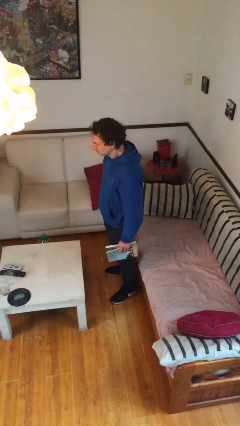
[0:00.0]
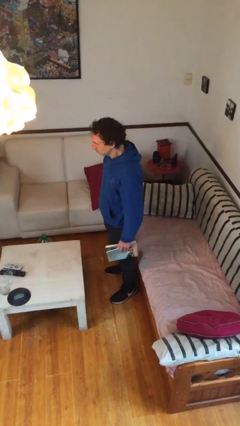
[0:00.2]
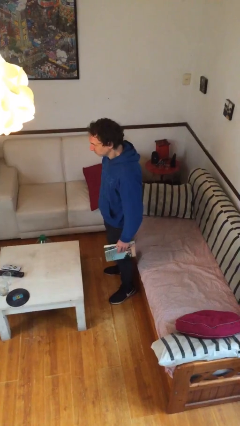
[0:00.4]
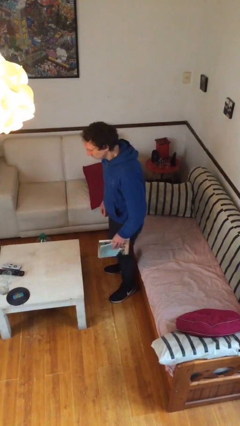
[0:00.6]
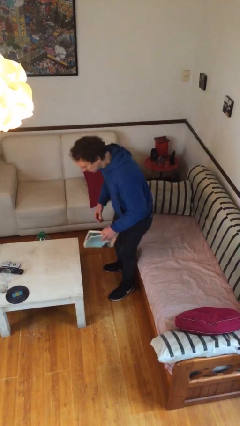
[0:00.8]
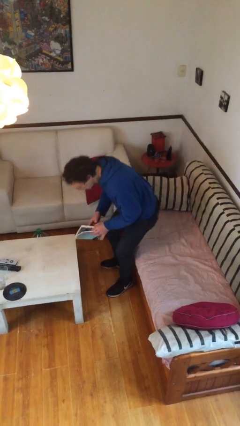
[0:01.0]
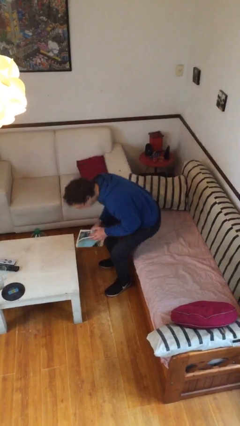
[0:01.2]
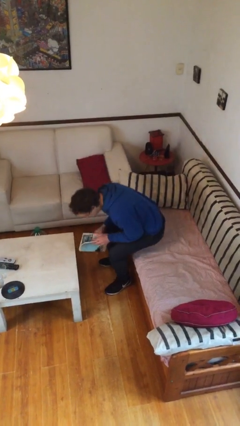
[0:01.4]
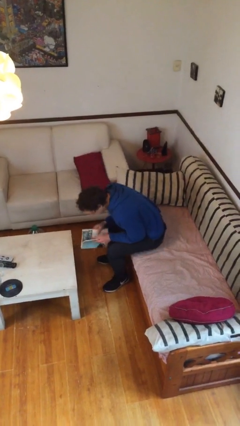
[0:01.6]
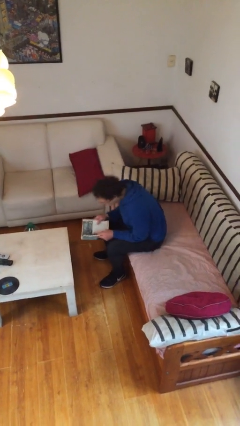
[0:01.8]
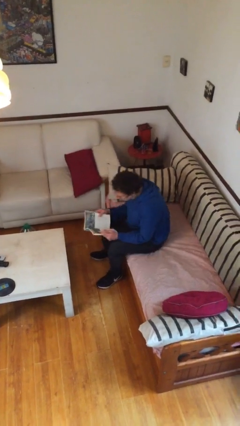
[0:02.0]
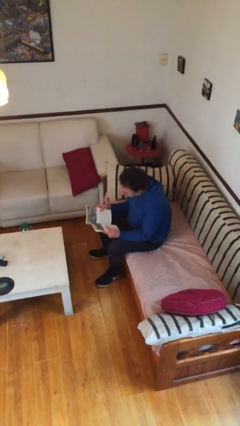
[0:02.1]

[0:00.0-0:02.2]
person sits down

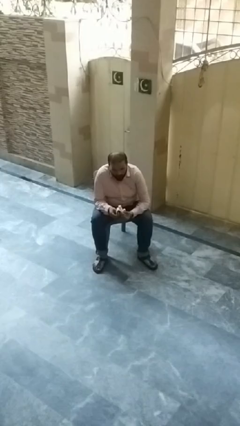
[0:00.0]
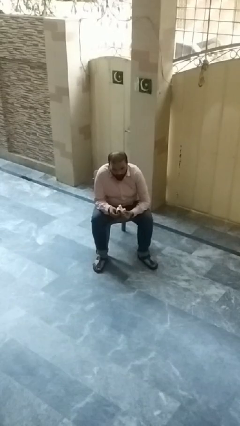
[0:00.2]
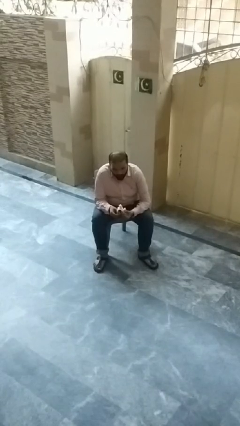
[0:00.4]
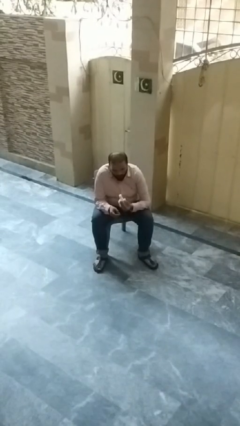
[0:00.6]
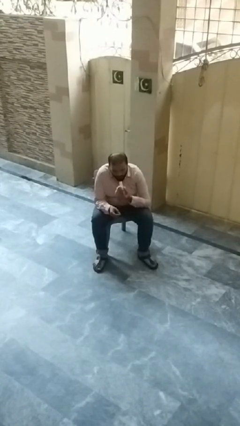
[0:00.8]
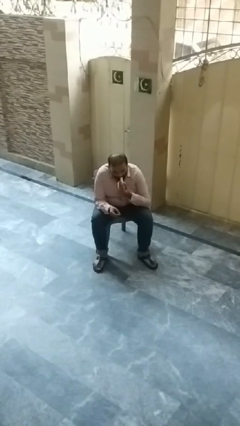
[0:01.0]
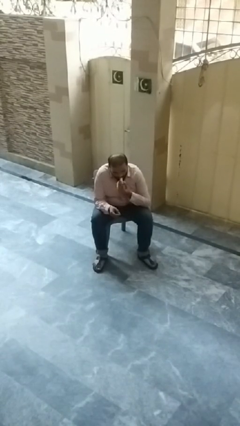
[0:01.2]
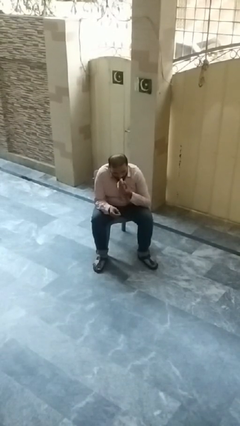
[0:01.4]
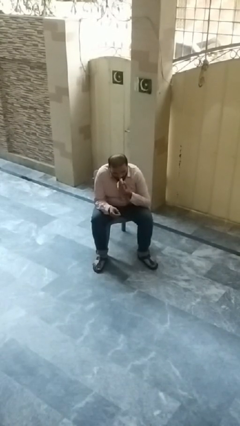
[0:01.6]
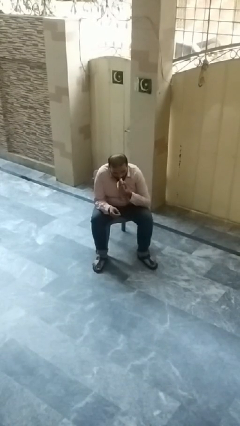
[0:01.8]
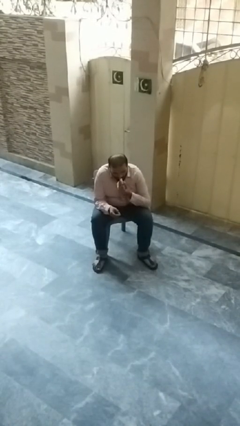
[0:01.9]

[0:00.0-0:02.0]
person eats banana

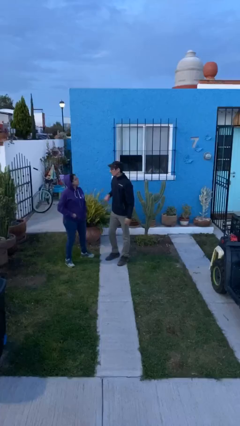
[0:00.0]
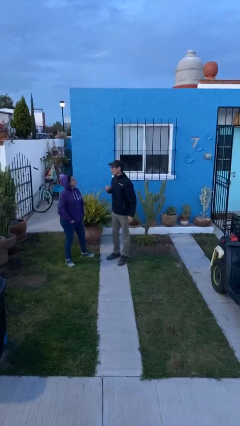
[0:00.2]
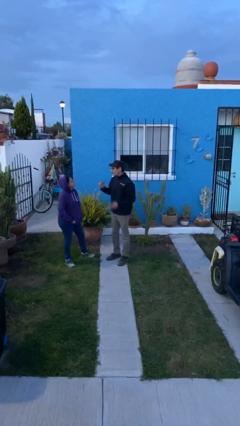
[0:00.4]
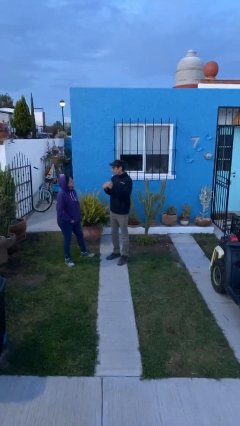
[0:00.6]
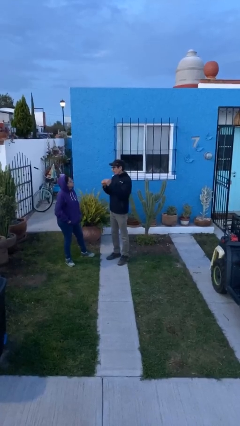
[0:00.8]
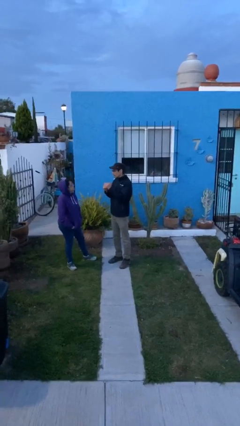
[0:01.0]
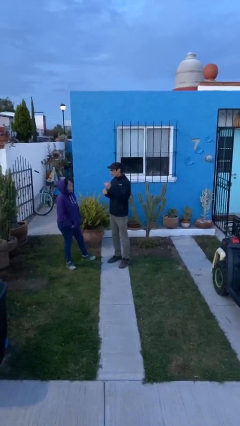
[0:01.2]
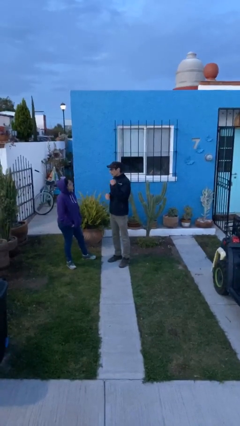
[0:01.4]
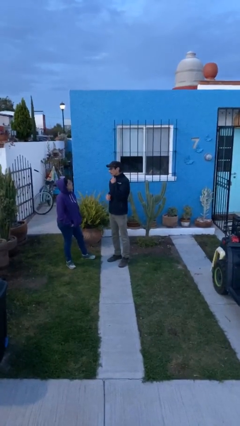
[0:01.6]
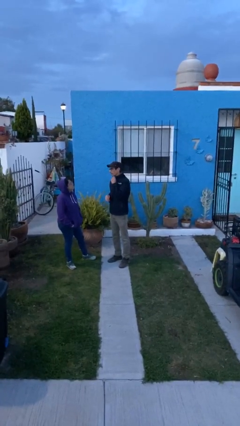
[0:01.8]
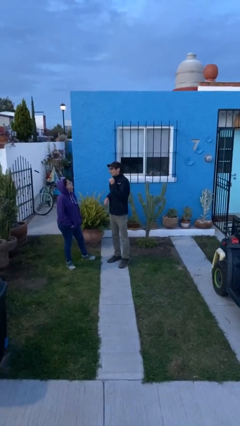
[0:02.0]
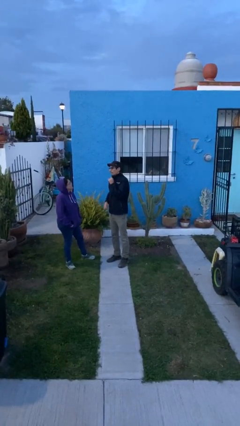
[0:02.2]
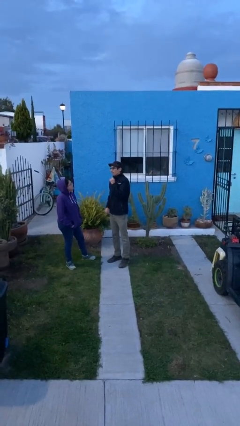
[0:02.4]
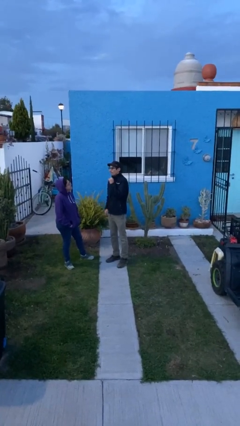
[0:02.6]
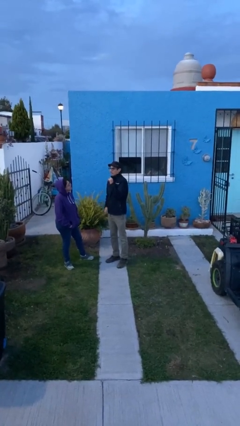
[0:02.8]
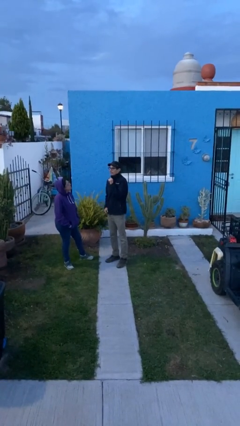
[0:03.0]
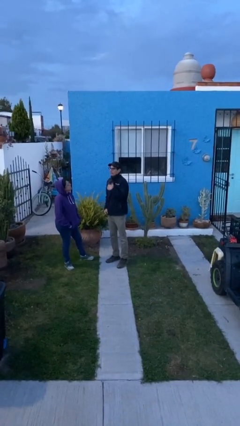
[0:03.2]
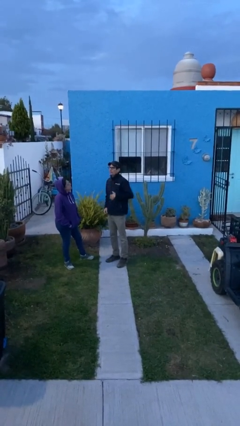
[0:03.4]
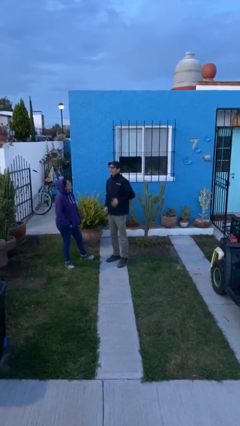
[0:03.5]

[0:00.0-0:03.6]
person talks to person

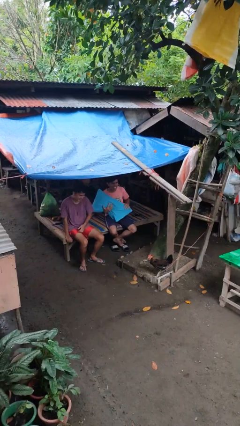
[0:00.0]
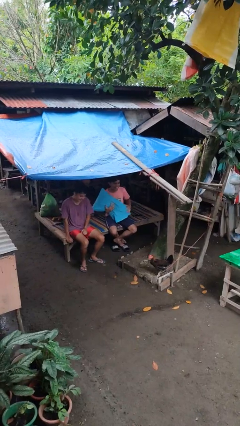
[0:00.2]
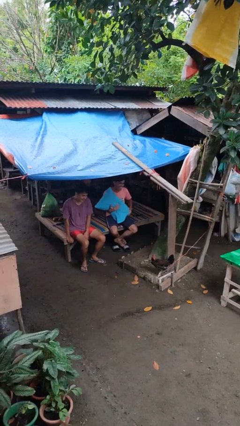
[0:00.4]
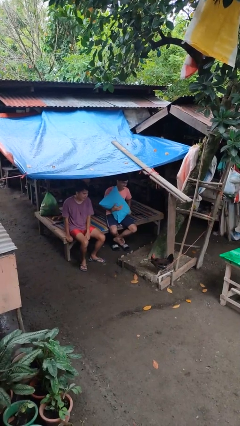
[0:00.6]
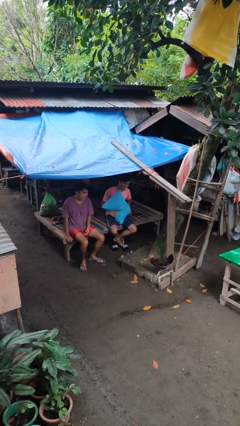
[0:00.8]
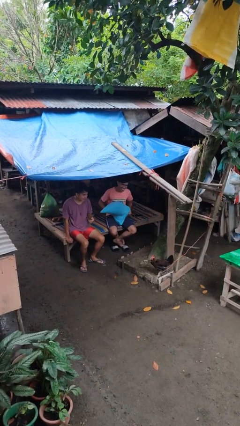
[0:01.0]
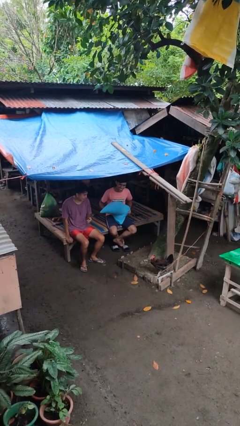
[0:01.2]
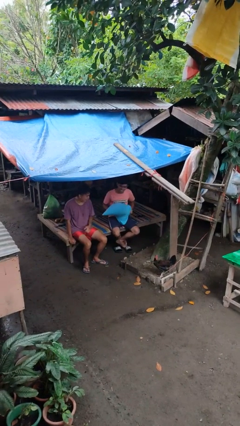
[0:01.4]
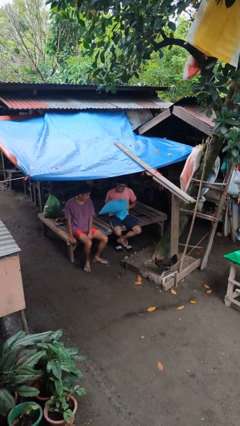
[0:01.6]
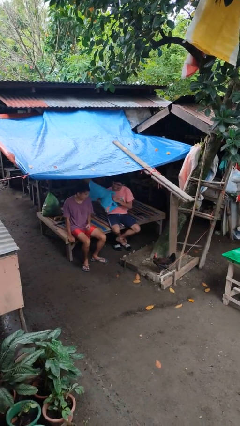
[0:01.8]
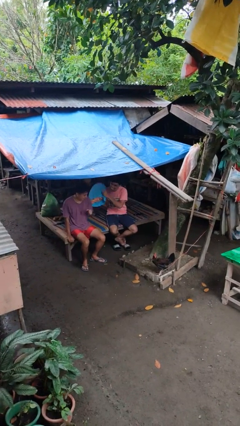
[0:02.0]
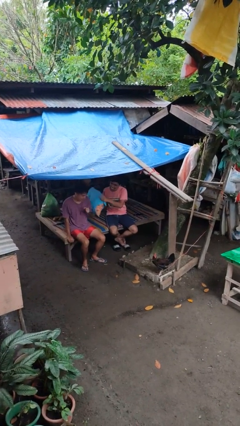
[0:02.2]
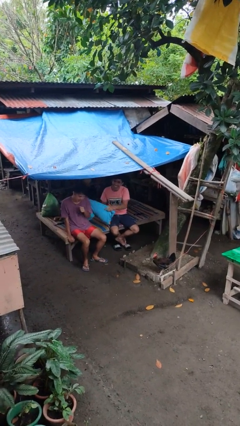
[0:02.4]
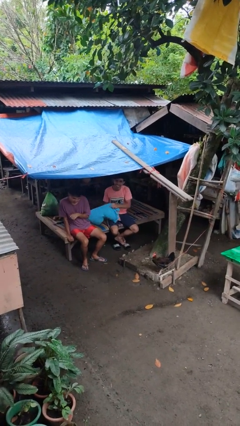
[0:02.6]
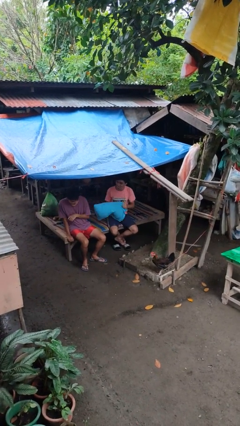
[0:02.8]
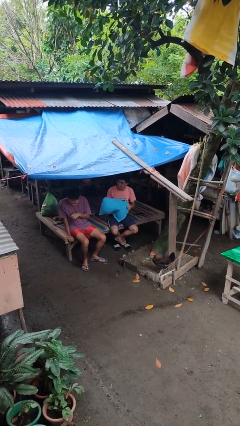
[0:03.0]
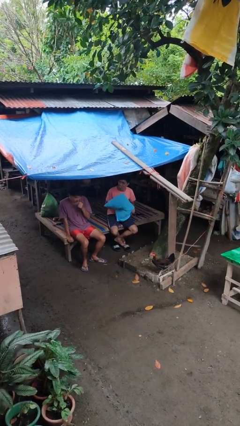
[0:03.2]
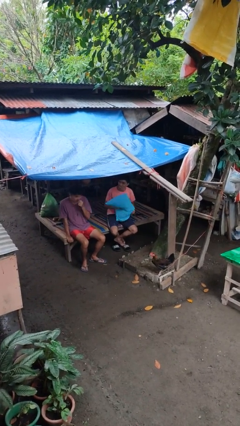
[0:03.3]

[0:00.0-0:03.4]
person hits person with pillow

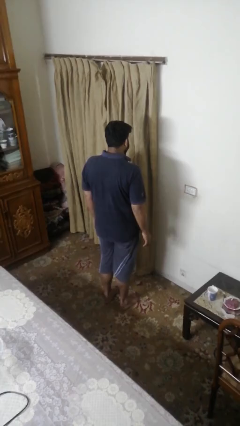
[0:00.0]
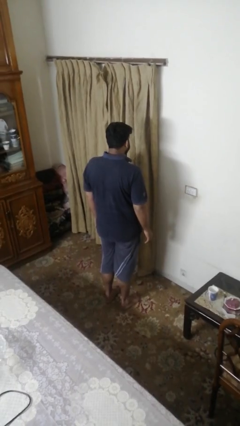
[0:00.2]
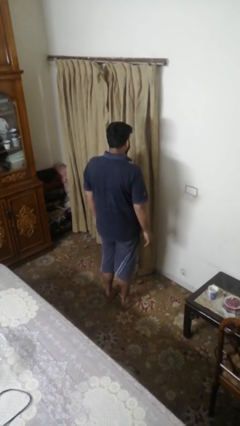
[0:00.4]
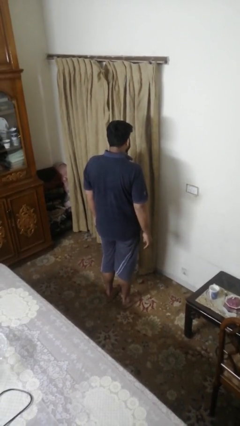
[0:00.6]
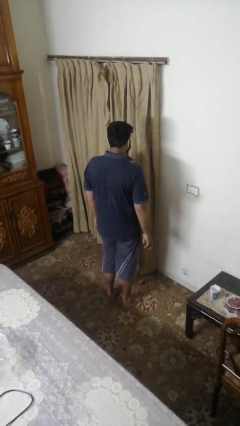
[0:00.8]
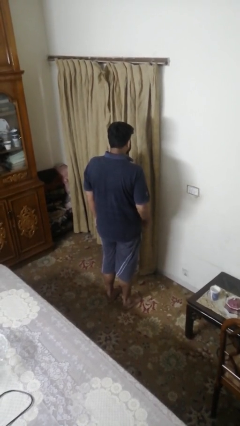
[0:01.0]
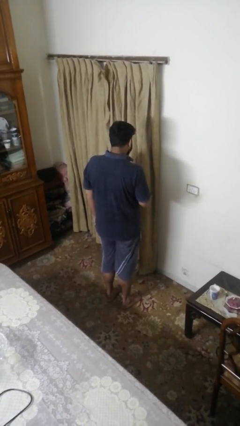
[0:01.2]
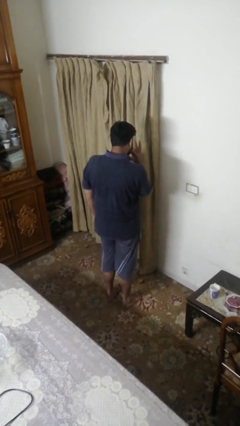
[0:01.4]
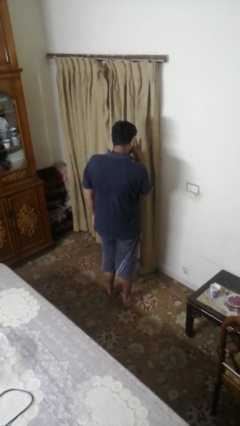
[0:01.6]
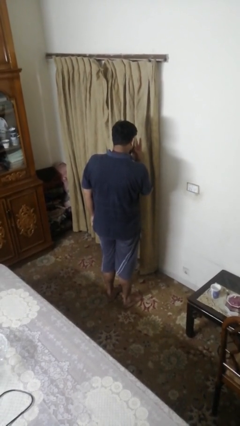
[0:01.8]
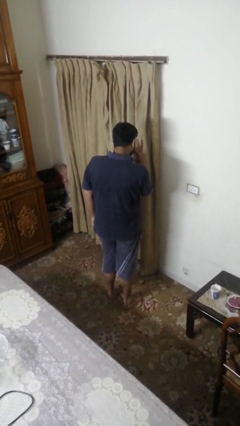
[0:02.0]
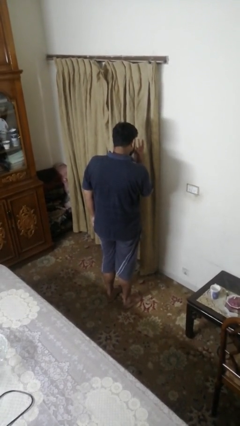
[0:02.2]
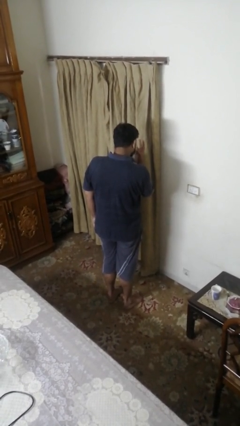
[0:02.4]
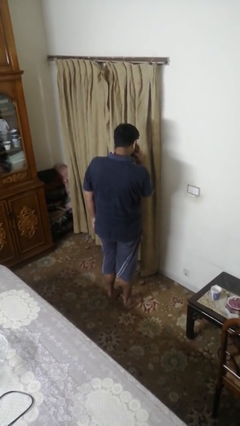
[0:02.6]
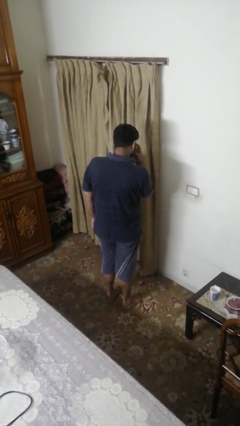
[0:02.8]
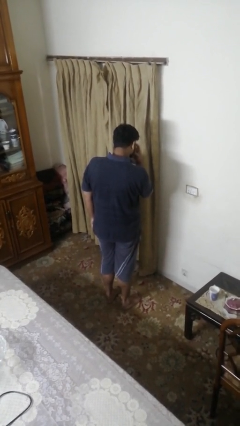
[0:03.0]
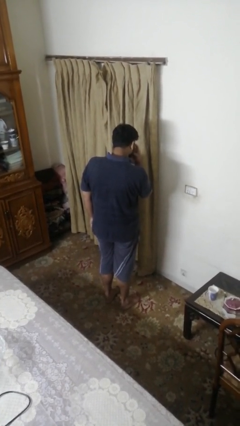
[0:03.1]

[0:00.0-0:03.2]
person gestures watch closely

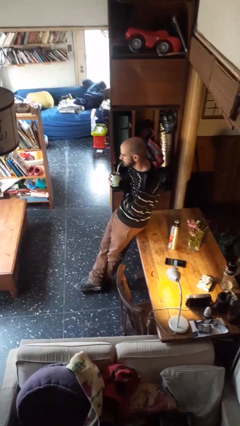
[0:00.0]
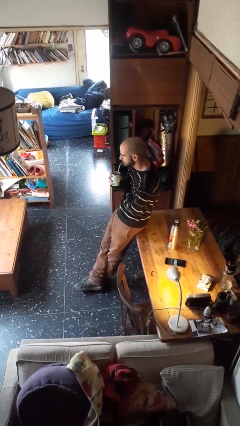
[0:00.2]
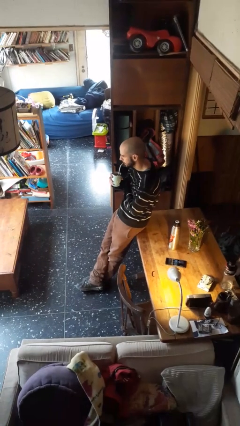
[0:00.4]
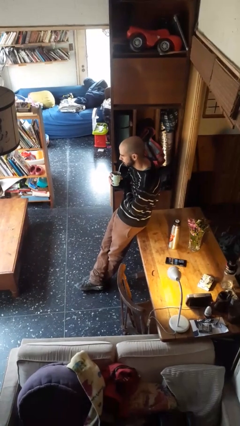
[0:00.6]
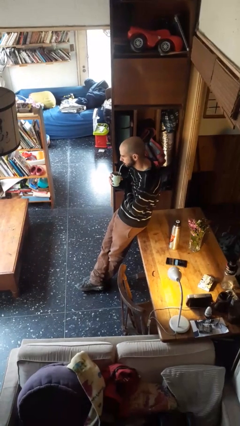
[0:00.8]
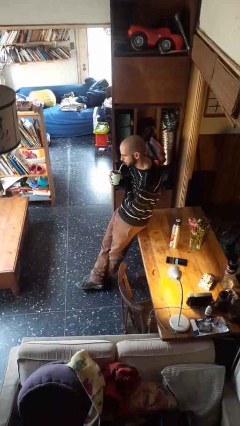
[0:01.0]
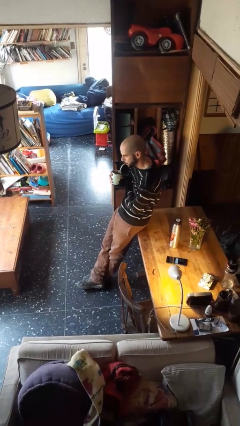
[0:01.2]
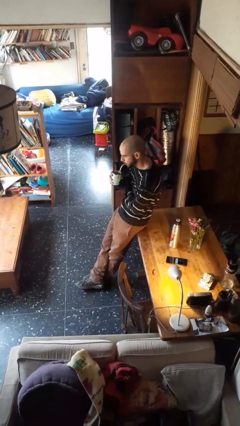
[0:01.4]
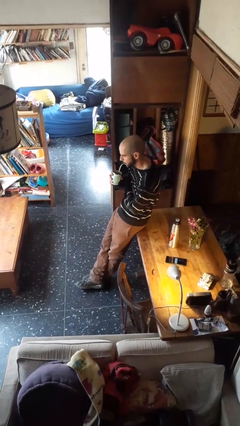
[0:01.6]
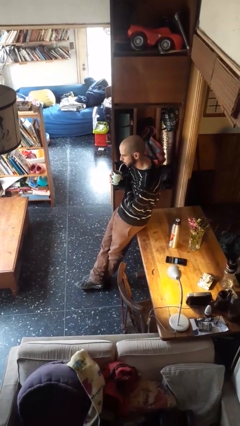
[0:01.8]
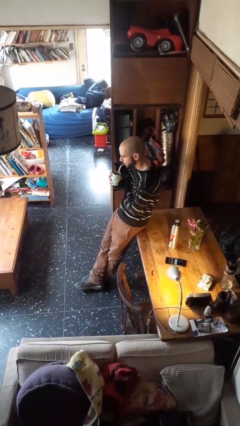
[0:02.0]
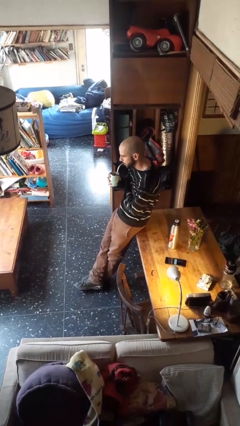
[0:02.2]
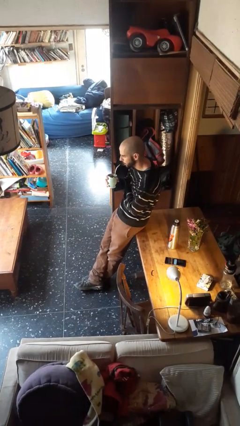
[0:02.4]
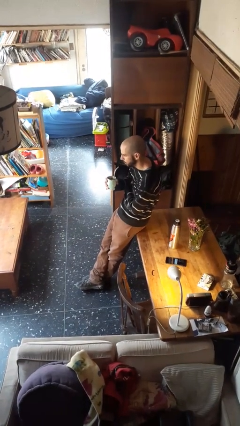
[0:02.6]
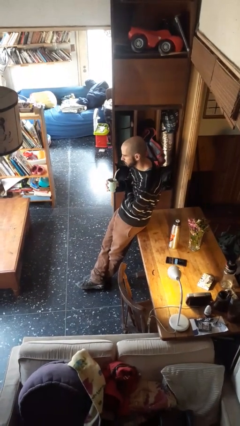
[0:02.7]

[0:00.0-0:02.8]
person drinks from straw
